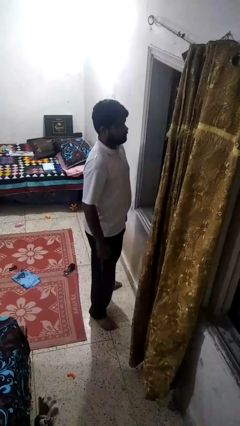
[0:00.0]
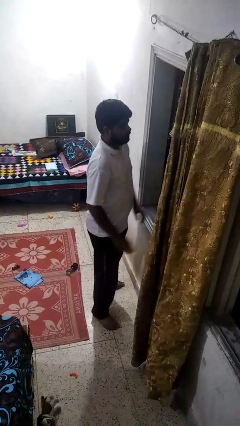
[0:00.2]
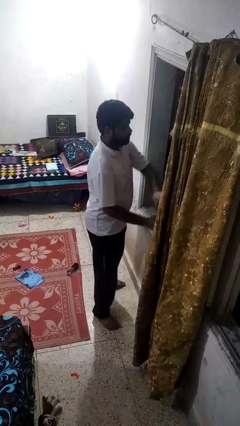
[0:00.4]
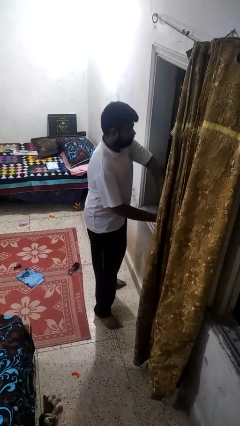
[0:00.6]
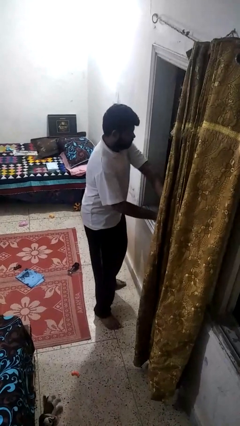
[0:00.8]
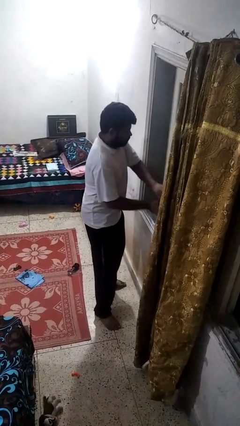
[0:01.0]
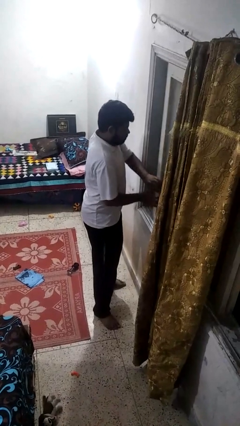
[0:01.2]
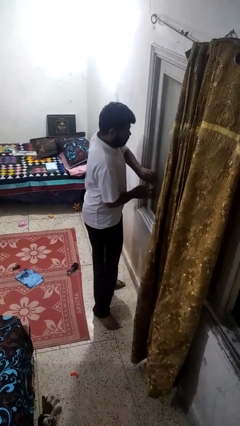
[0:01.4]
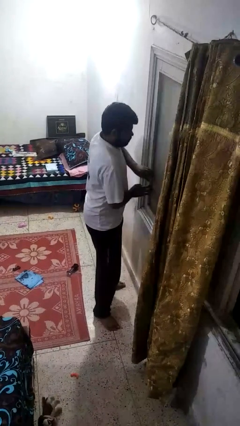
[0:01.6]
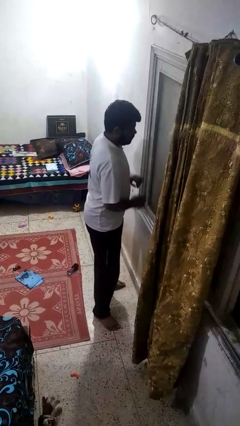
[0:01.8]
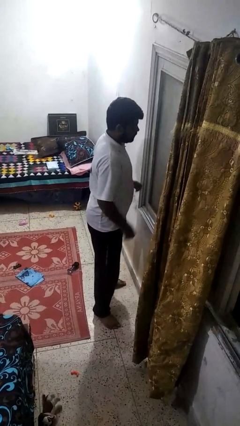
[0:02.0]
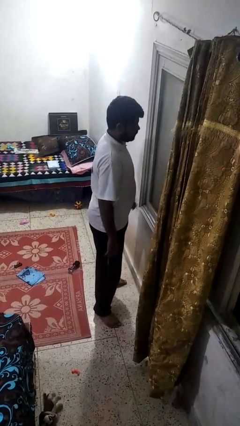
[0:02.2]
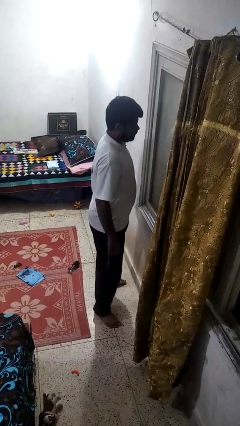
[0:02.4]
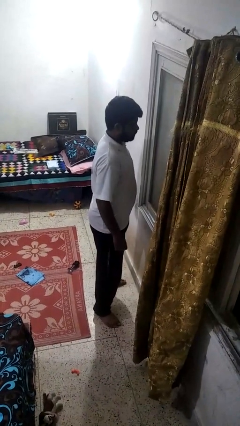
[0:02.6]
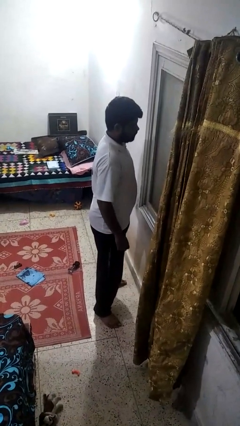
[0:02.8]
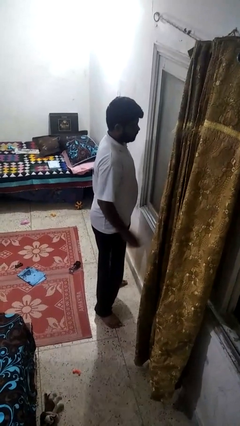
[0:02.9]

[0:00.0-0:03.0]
person closes sliding door

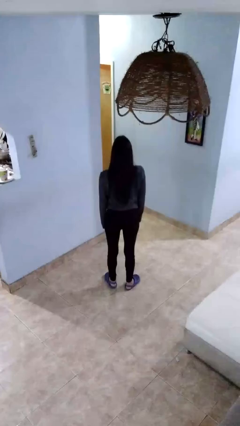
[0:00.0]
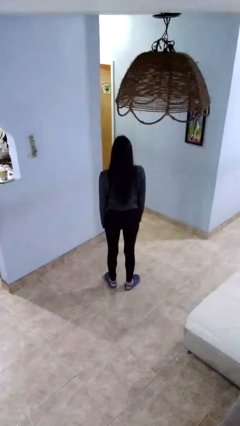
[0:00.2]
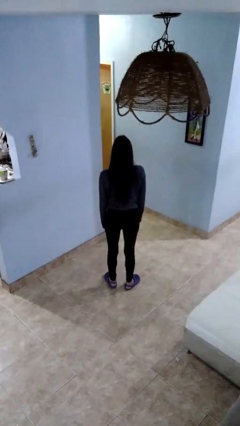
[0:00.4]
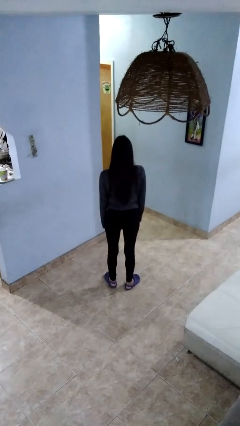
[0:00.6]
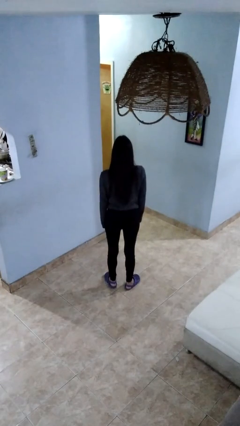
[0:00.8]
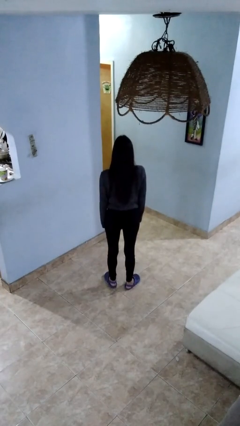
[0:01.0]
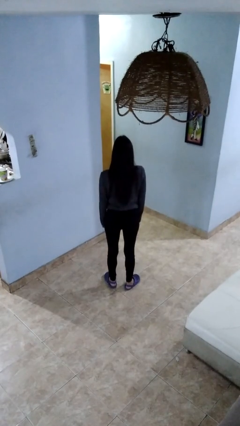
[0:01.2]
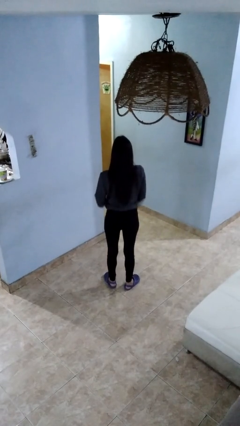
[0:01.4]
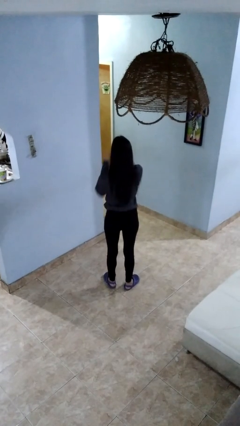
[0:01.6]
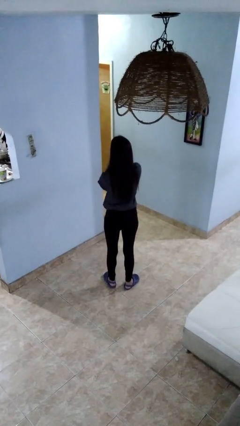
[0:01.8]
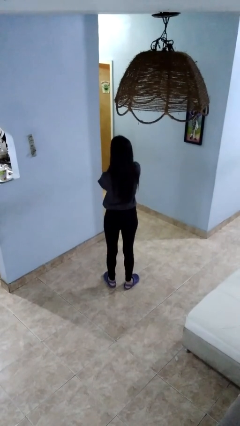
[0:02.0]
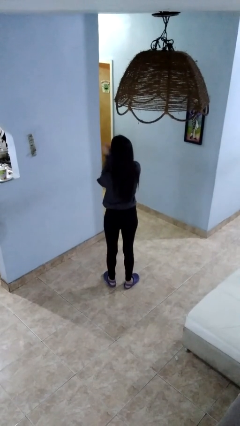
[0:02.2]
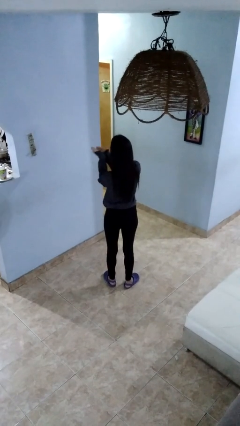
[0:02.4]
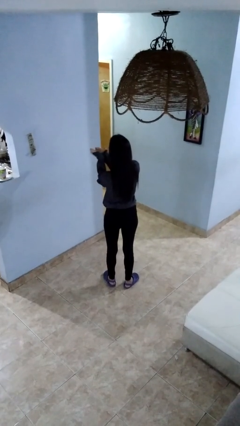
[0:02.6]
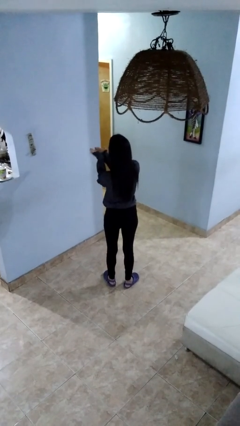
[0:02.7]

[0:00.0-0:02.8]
person gestures blow kiss

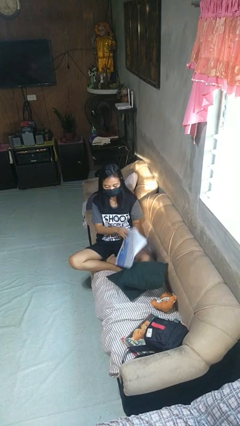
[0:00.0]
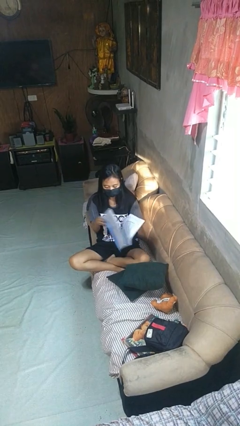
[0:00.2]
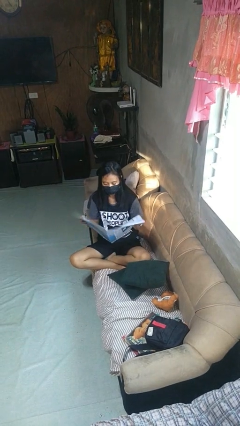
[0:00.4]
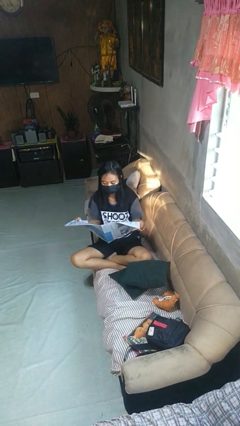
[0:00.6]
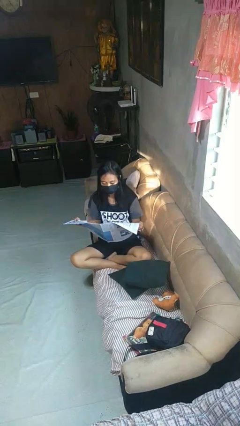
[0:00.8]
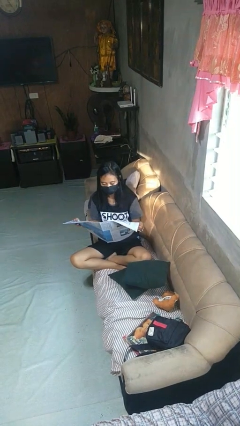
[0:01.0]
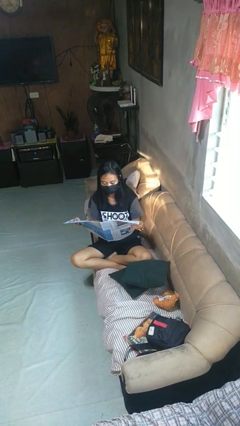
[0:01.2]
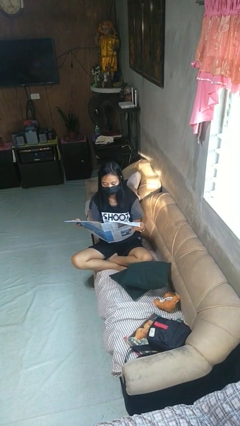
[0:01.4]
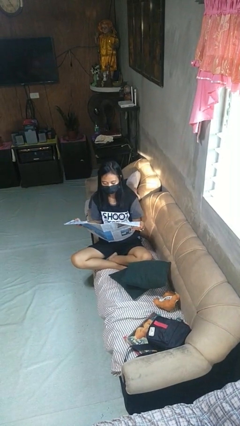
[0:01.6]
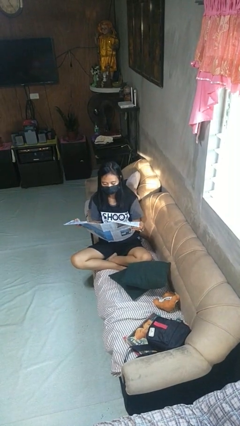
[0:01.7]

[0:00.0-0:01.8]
person reads newspaper

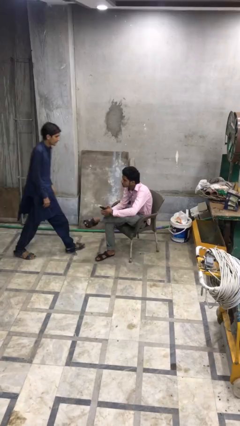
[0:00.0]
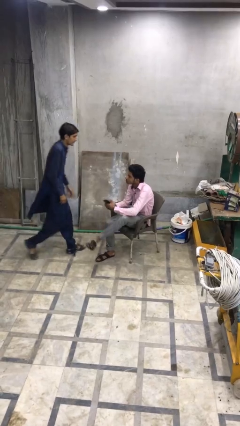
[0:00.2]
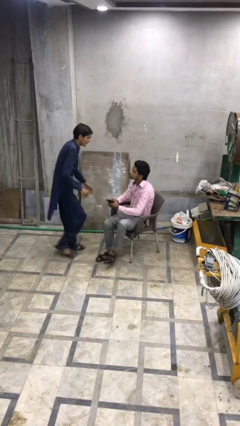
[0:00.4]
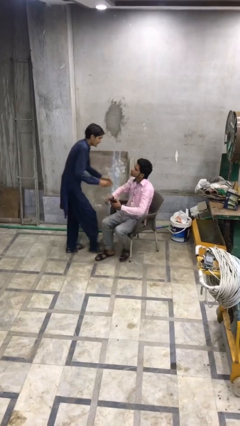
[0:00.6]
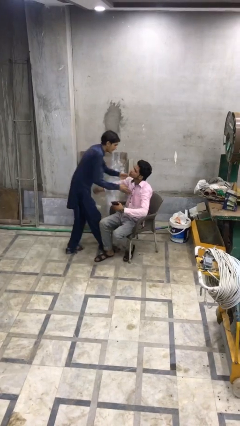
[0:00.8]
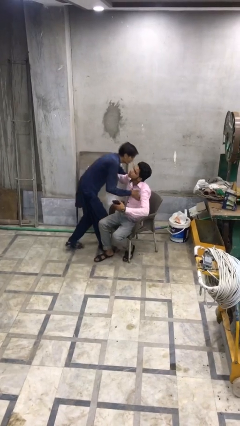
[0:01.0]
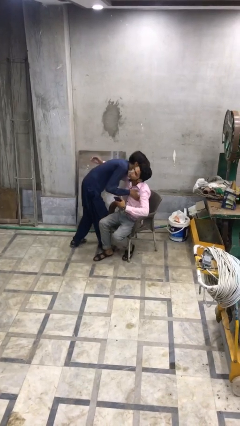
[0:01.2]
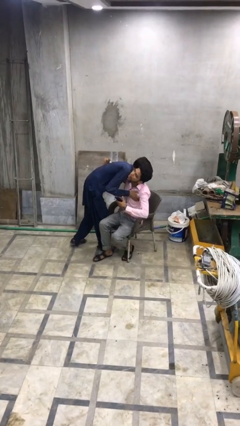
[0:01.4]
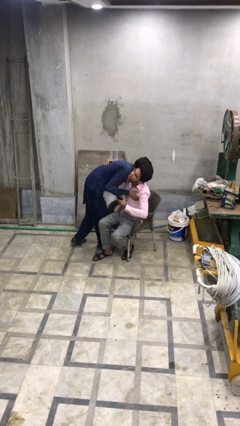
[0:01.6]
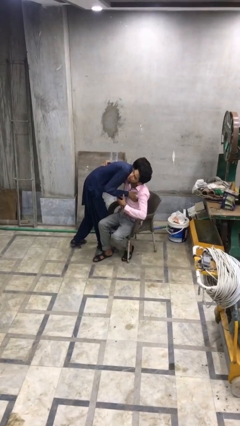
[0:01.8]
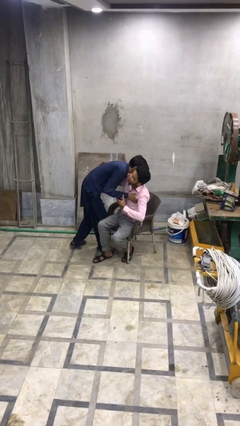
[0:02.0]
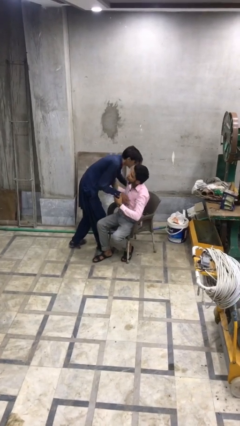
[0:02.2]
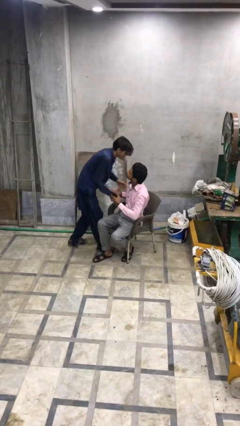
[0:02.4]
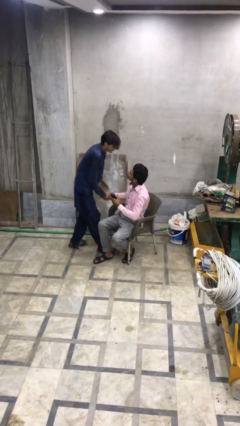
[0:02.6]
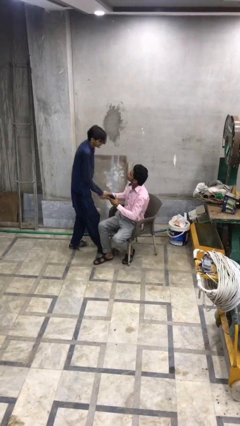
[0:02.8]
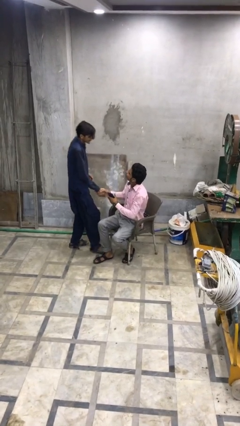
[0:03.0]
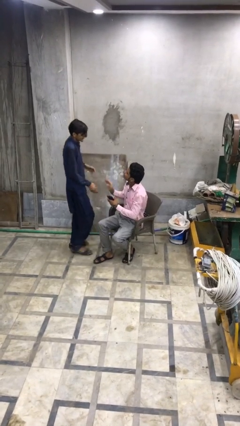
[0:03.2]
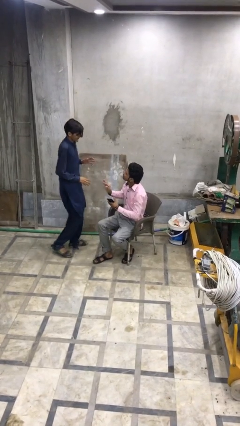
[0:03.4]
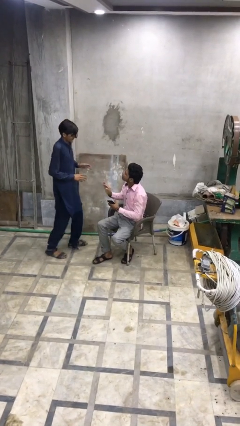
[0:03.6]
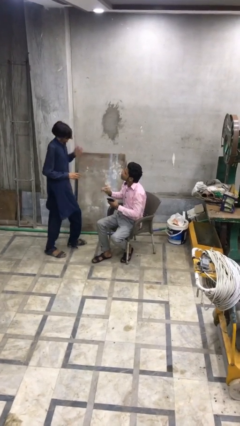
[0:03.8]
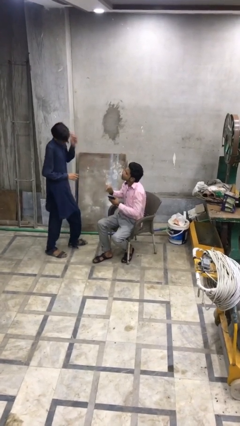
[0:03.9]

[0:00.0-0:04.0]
person embraces person

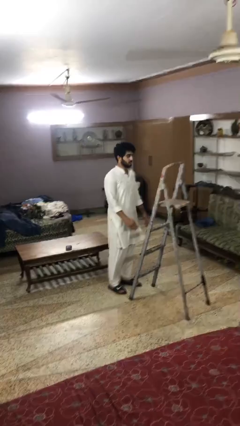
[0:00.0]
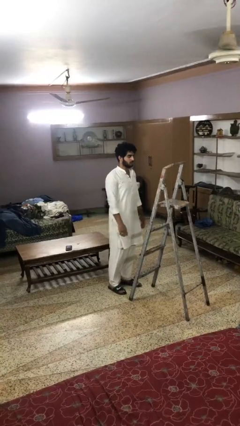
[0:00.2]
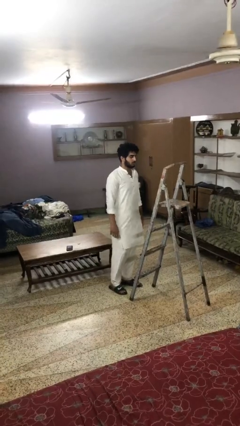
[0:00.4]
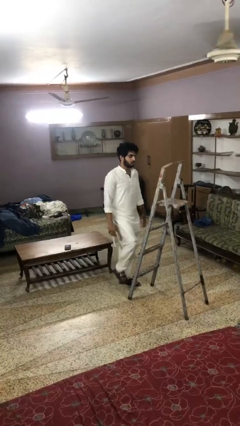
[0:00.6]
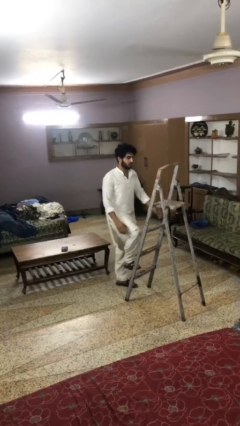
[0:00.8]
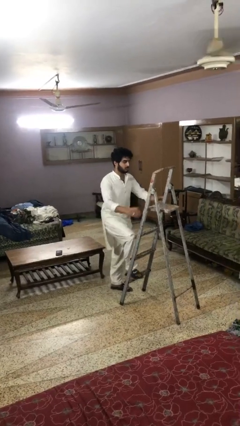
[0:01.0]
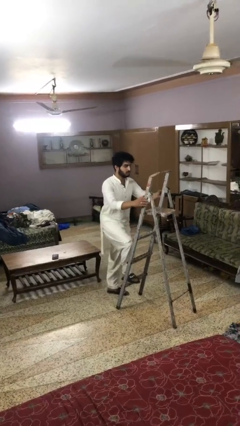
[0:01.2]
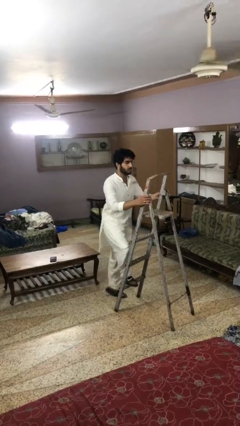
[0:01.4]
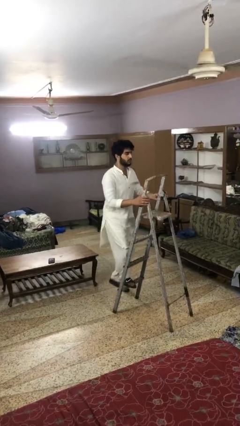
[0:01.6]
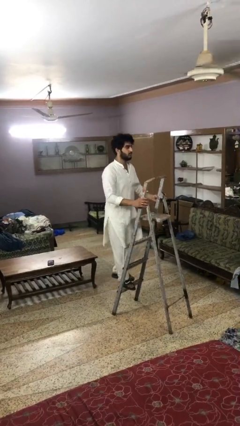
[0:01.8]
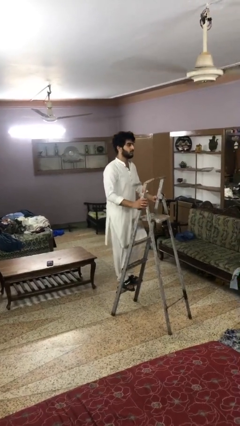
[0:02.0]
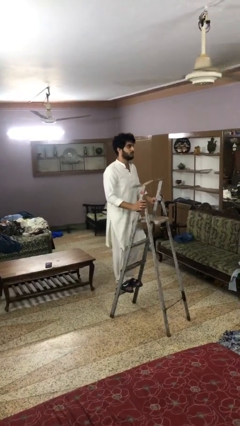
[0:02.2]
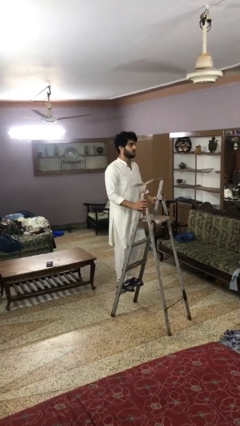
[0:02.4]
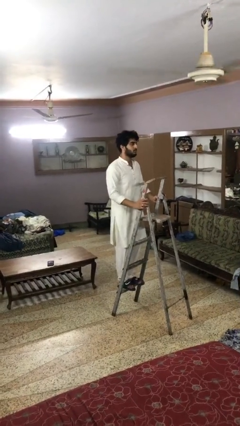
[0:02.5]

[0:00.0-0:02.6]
person climbs up ladder

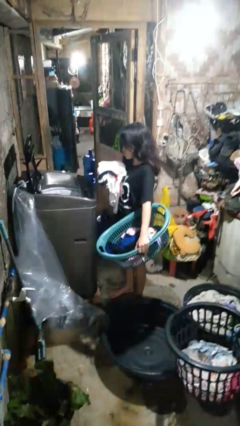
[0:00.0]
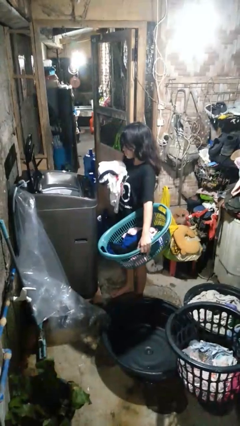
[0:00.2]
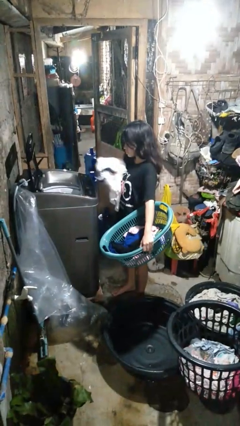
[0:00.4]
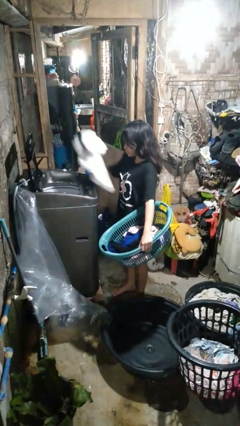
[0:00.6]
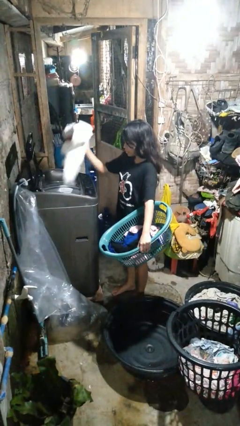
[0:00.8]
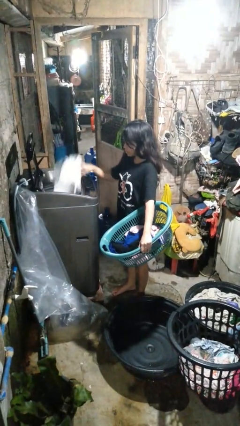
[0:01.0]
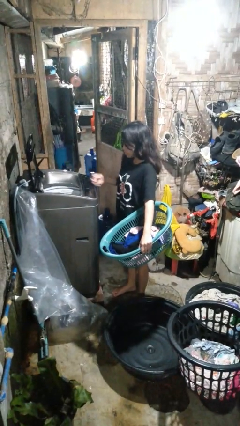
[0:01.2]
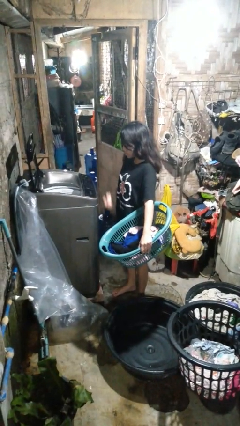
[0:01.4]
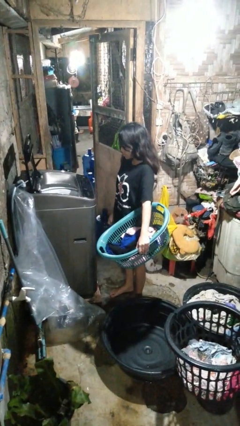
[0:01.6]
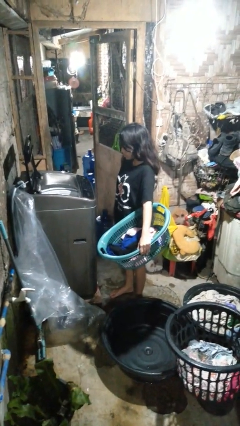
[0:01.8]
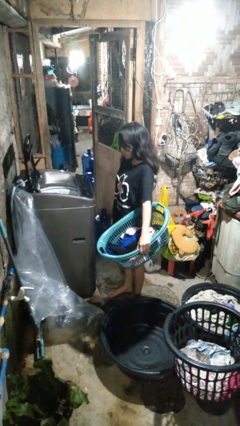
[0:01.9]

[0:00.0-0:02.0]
person loads clotheswasher

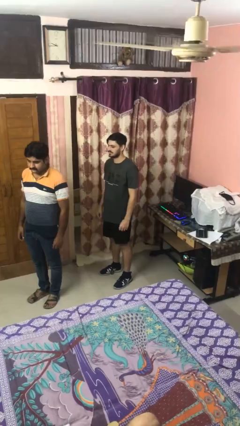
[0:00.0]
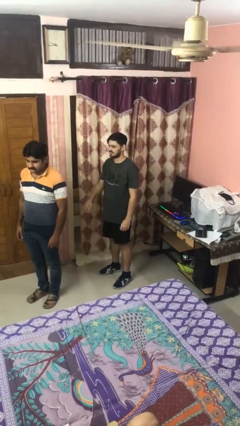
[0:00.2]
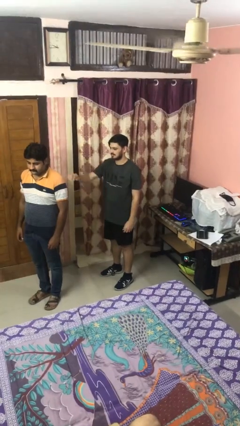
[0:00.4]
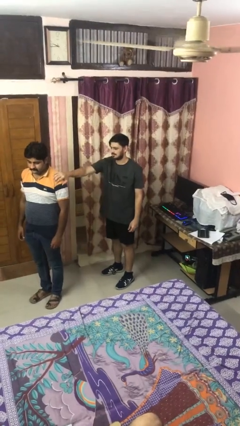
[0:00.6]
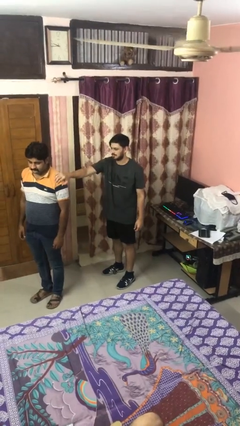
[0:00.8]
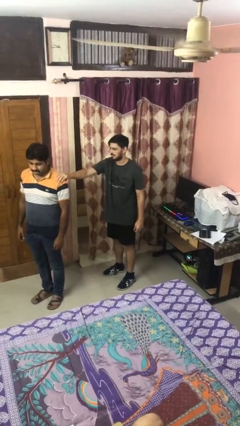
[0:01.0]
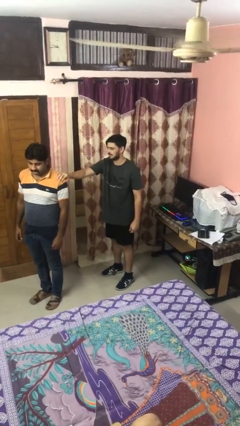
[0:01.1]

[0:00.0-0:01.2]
person grabs person by shoulder
